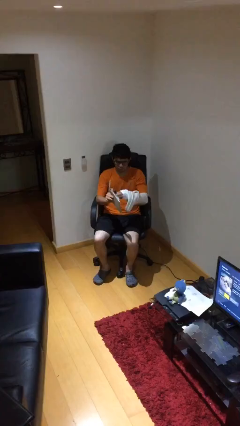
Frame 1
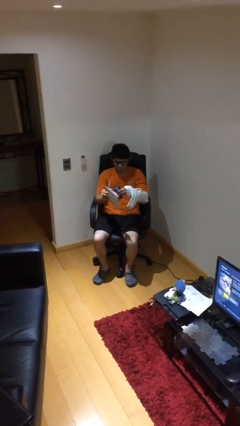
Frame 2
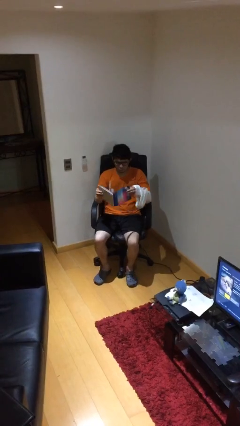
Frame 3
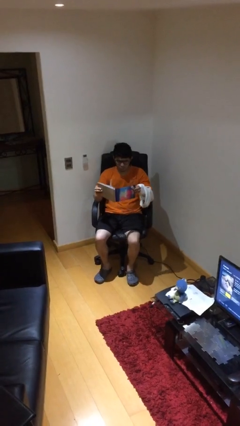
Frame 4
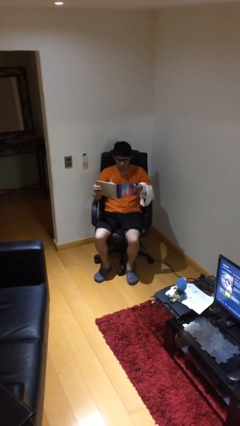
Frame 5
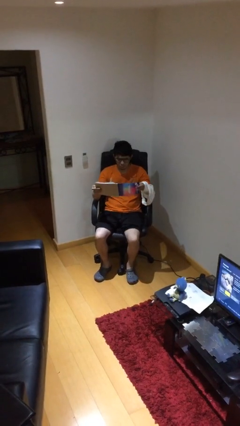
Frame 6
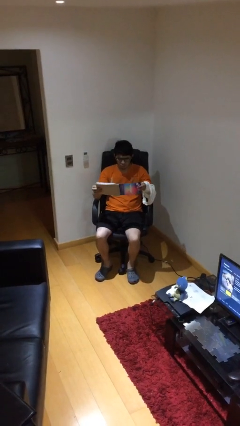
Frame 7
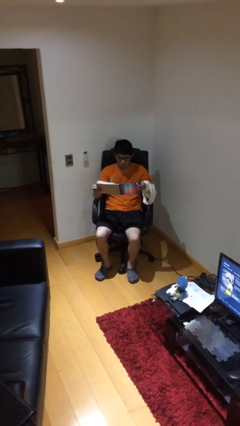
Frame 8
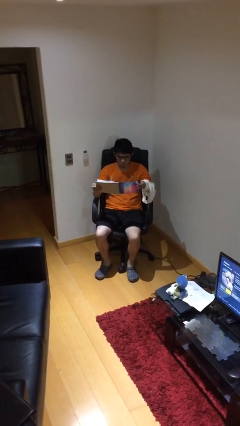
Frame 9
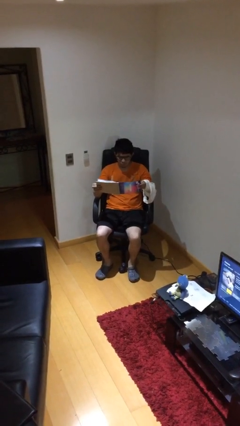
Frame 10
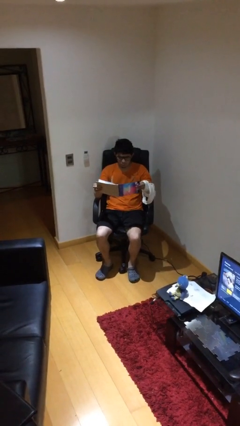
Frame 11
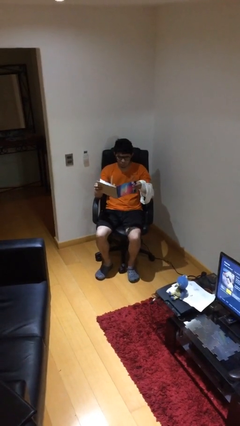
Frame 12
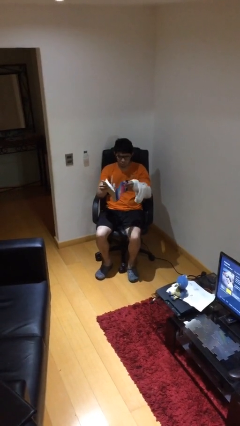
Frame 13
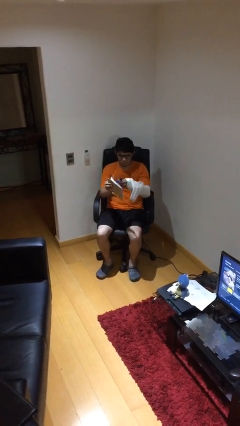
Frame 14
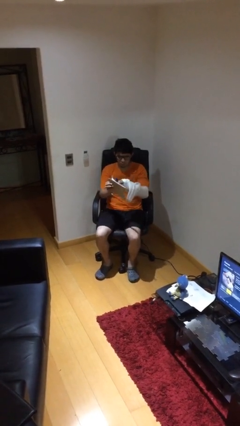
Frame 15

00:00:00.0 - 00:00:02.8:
person reads document

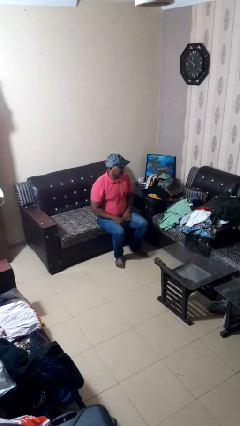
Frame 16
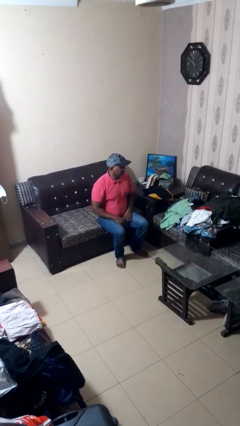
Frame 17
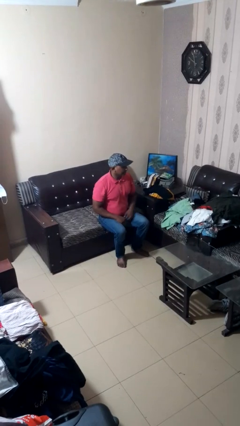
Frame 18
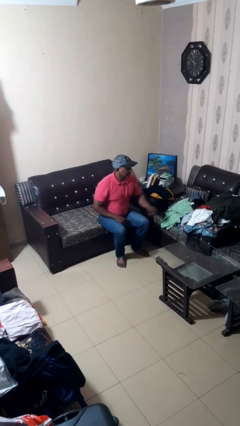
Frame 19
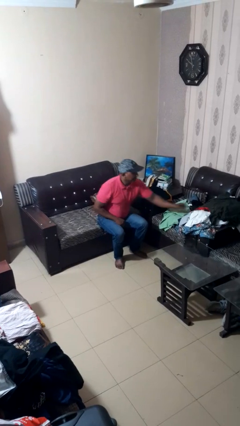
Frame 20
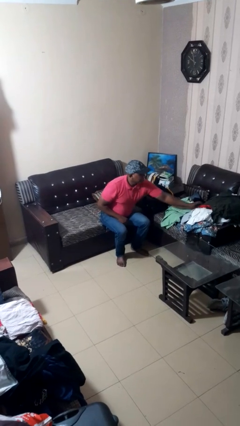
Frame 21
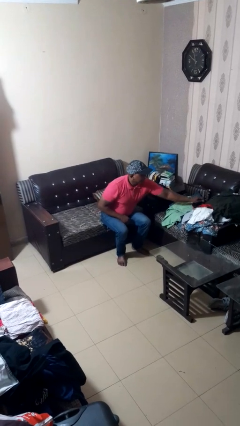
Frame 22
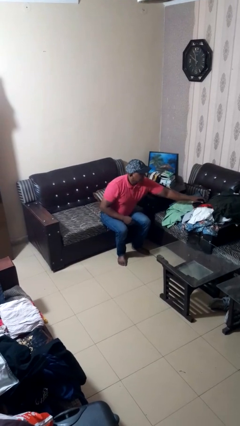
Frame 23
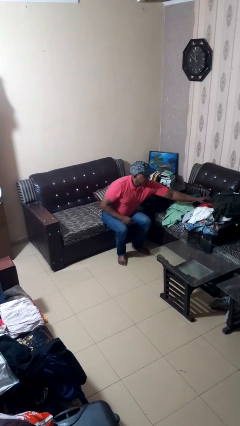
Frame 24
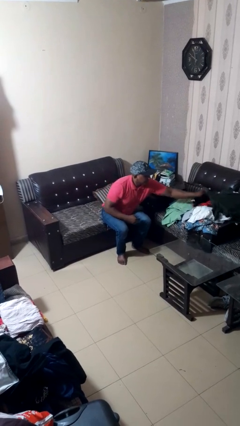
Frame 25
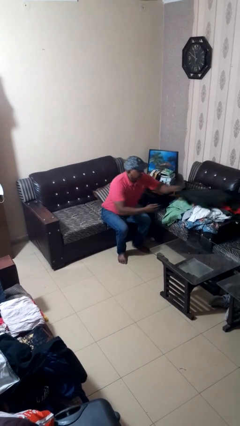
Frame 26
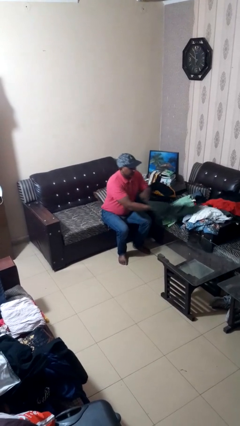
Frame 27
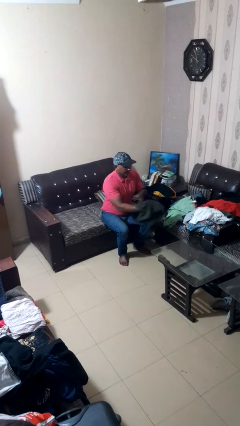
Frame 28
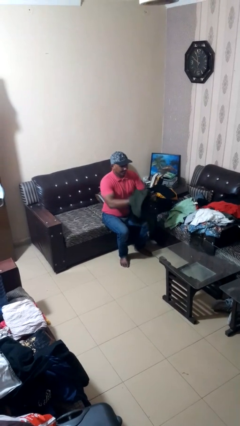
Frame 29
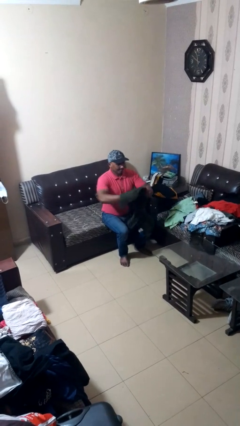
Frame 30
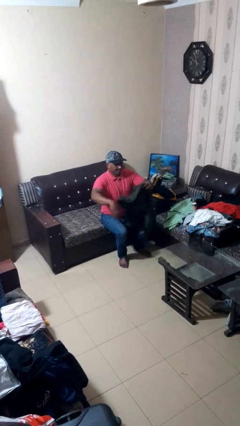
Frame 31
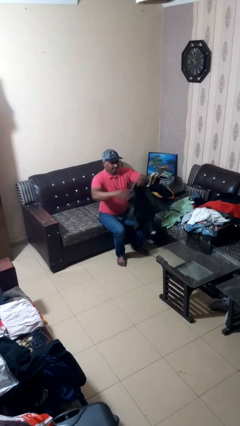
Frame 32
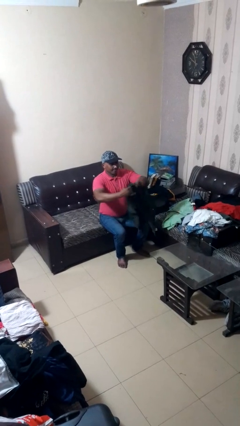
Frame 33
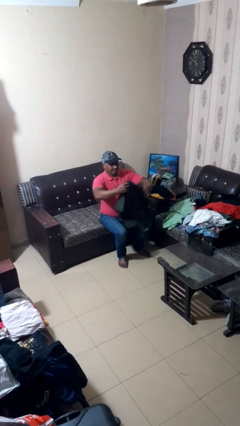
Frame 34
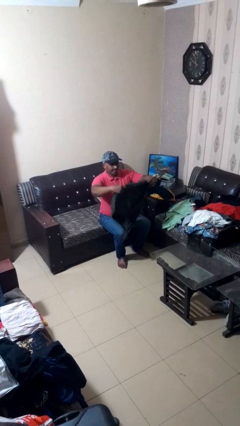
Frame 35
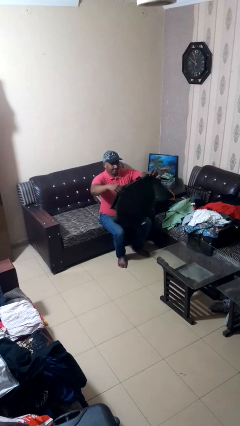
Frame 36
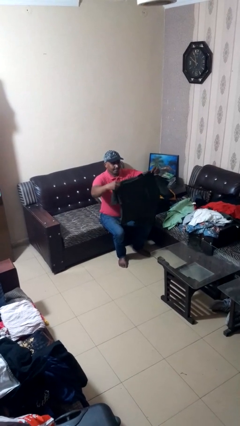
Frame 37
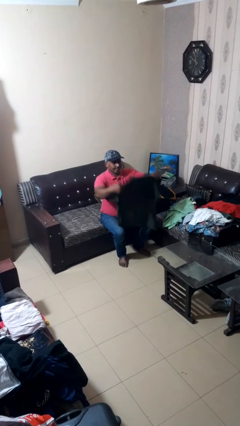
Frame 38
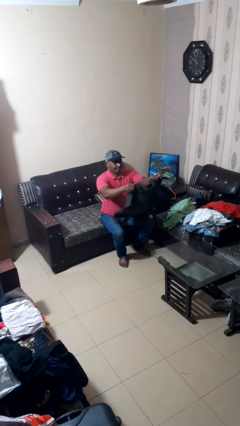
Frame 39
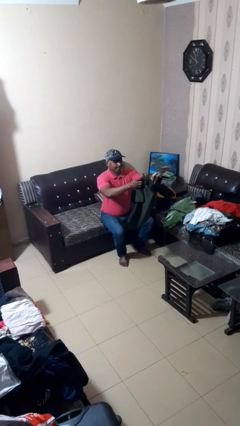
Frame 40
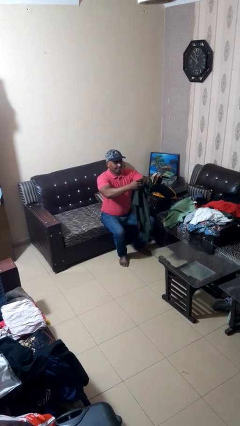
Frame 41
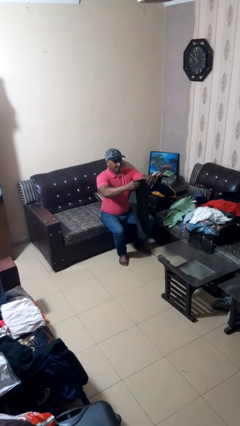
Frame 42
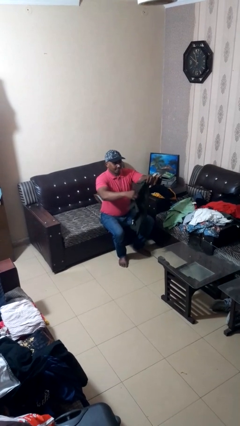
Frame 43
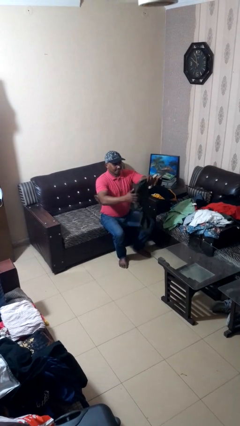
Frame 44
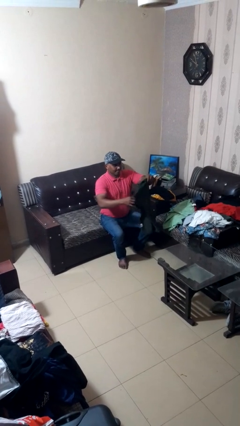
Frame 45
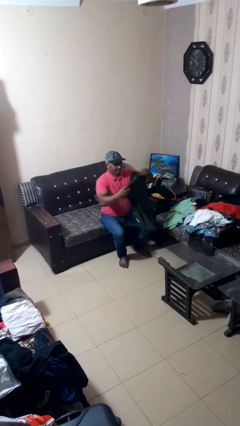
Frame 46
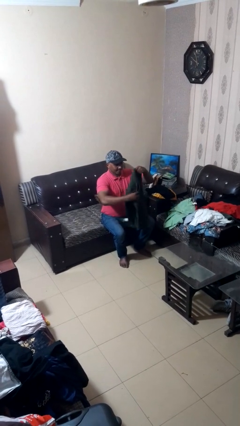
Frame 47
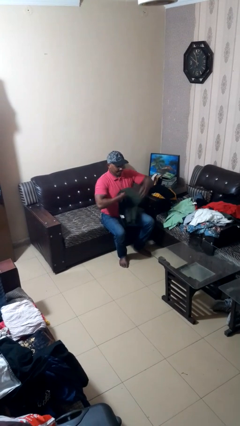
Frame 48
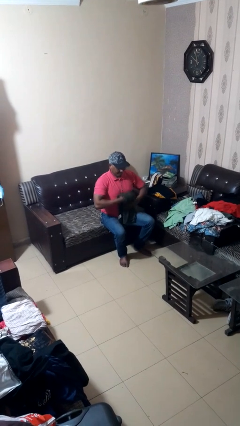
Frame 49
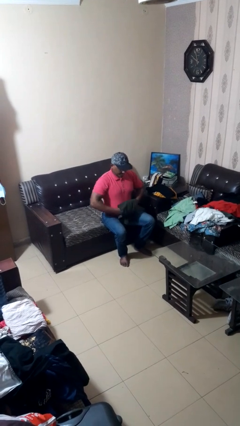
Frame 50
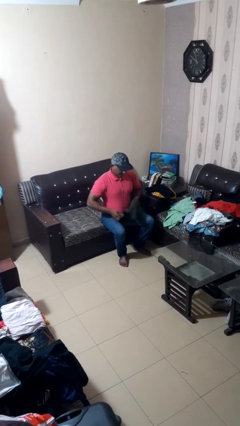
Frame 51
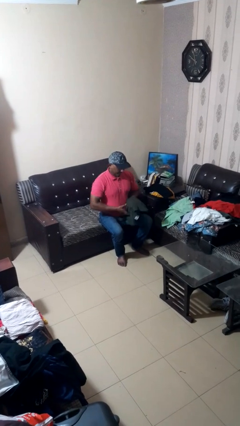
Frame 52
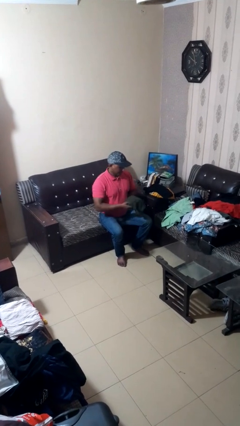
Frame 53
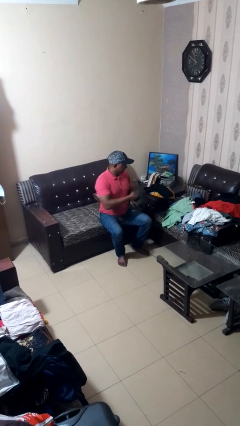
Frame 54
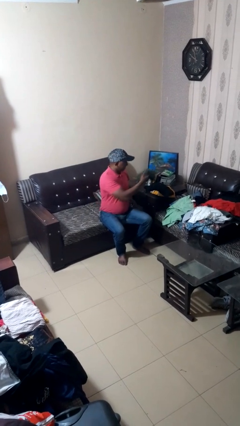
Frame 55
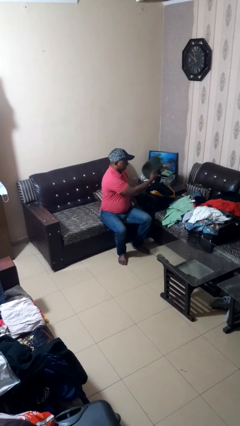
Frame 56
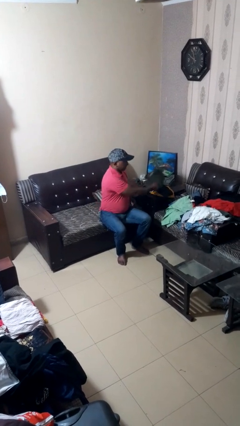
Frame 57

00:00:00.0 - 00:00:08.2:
person folds shirt

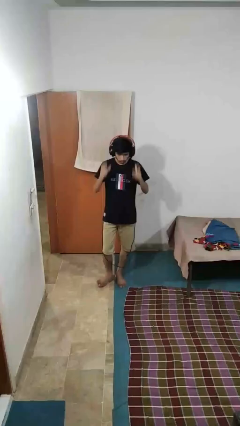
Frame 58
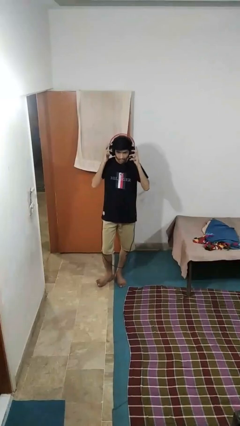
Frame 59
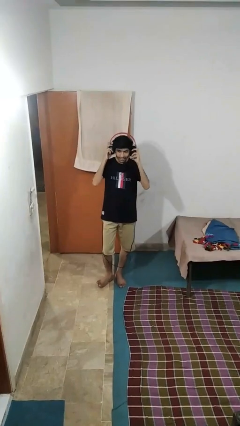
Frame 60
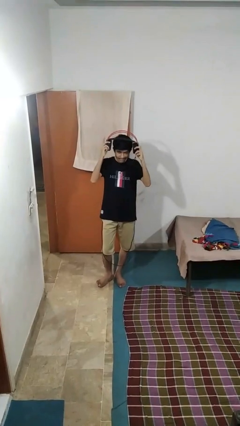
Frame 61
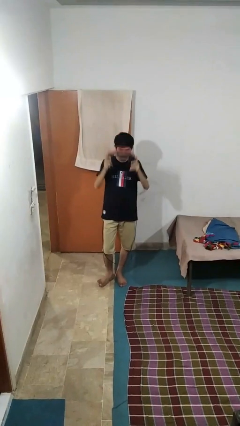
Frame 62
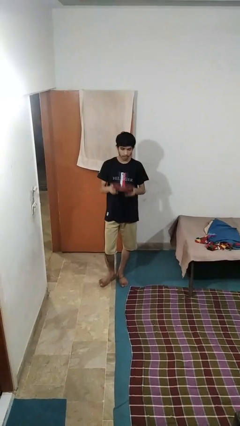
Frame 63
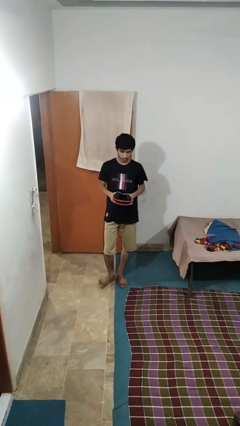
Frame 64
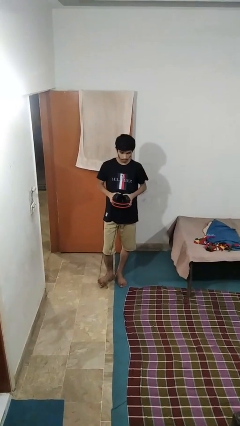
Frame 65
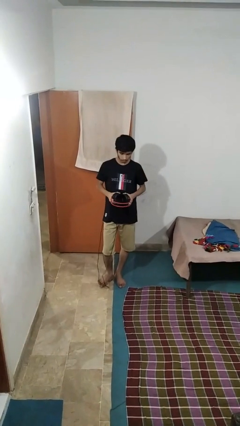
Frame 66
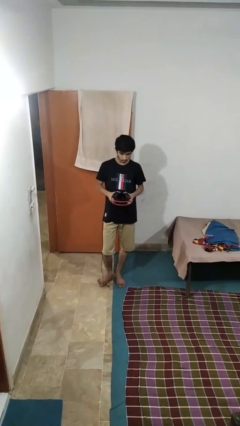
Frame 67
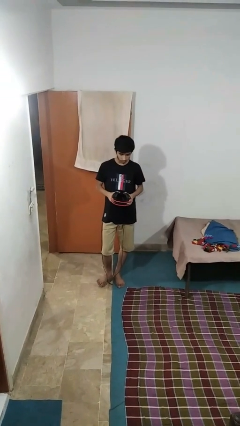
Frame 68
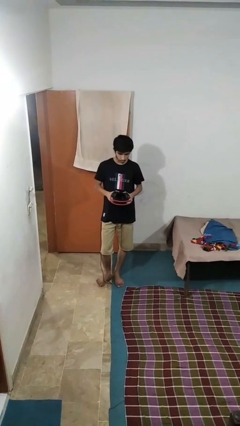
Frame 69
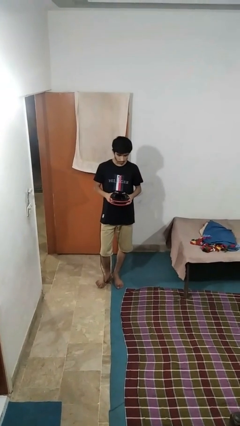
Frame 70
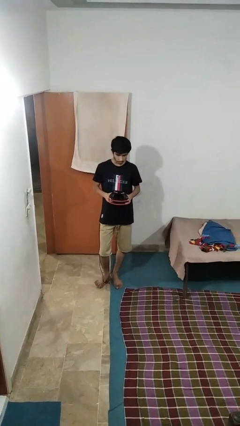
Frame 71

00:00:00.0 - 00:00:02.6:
person takes off headphones

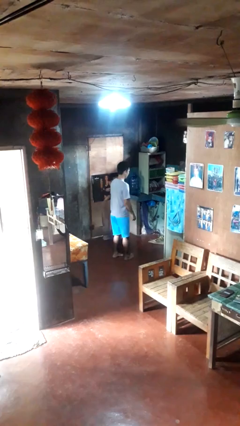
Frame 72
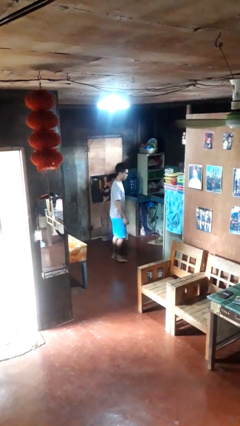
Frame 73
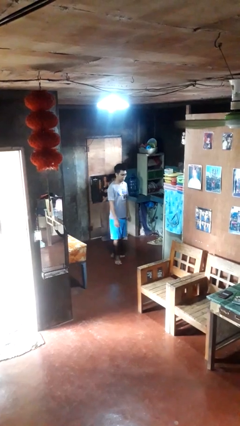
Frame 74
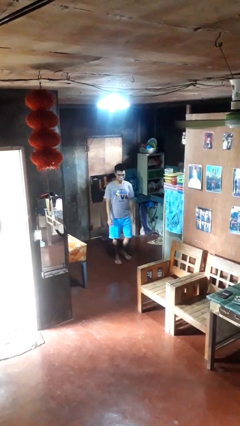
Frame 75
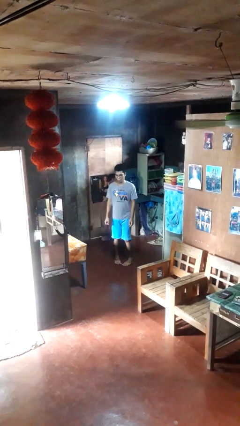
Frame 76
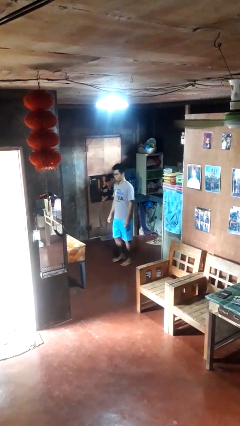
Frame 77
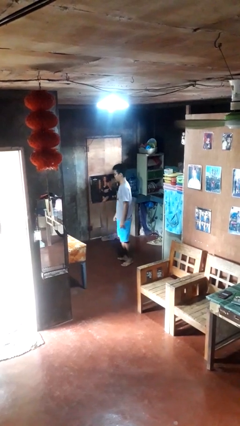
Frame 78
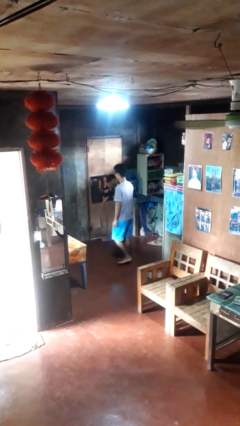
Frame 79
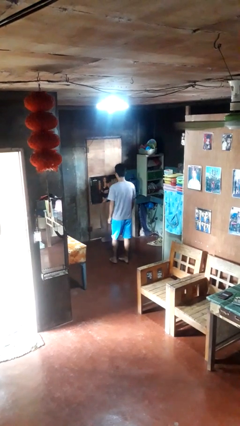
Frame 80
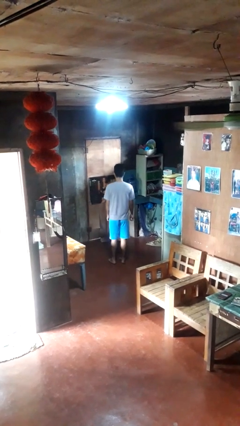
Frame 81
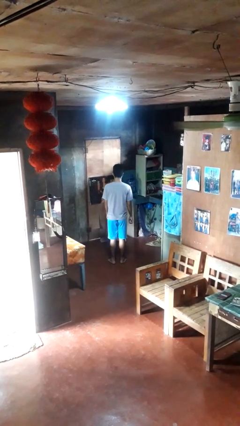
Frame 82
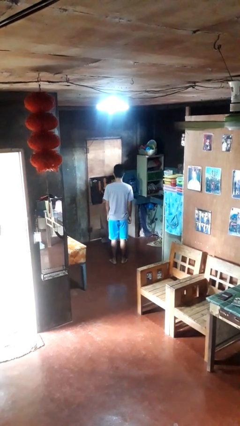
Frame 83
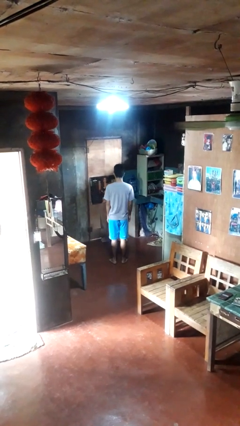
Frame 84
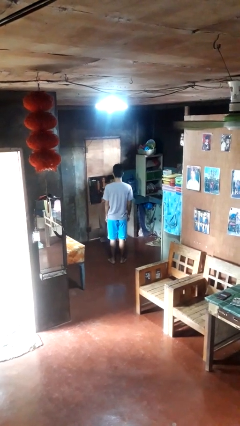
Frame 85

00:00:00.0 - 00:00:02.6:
person twirls

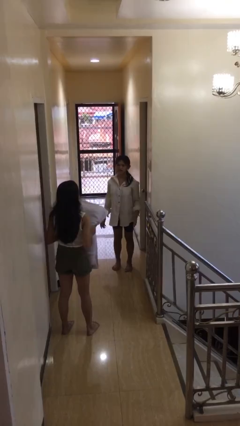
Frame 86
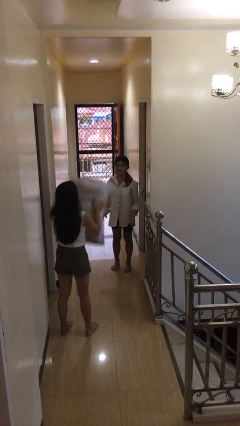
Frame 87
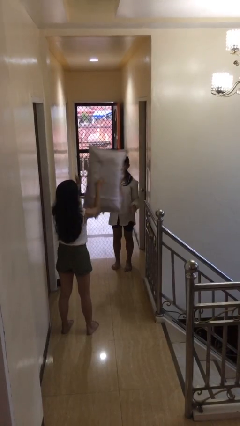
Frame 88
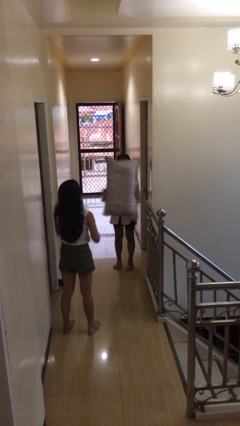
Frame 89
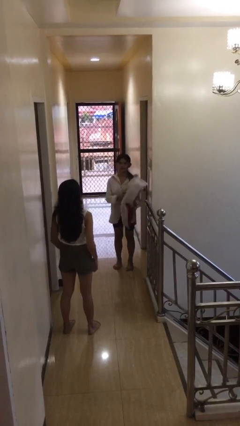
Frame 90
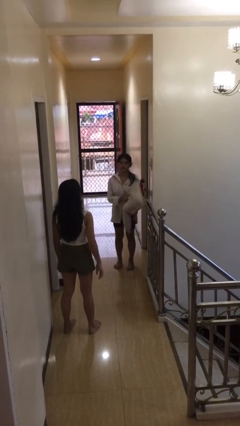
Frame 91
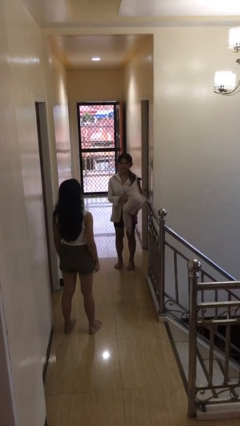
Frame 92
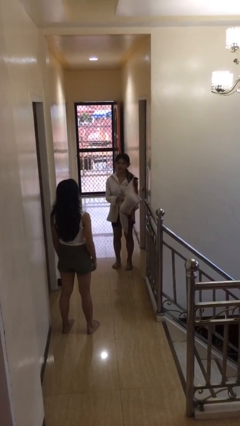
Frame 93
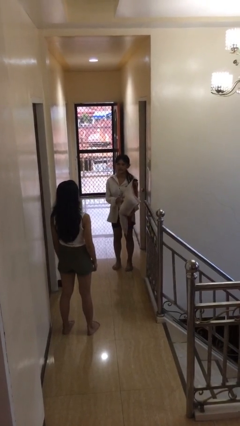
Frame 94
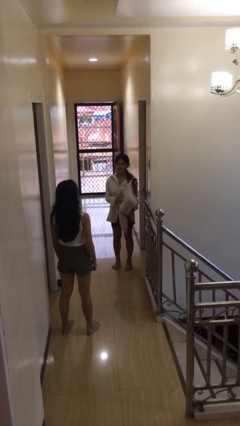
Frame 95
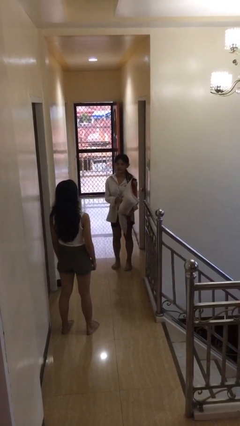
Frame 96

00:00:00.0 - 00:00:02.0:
person catches object from person
